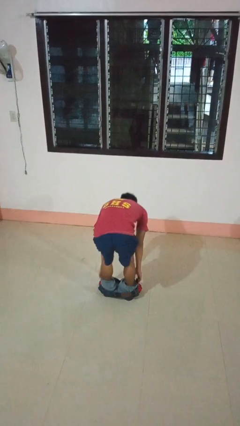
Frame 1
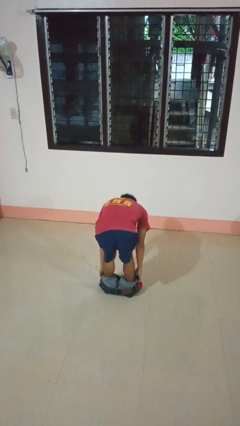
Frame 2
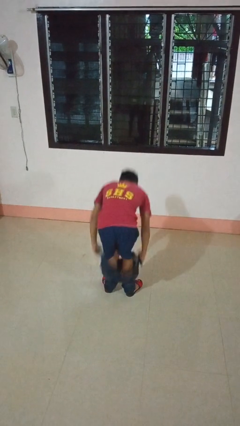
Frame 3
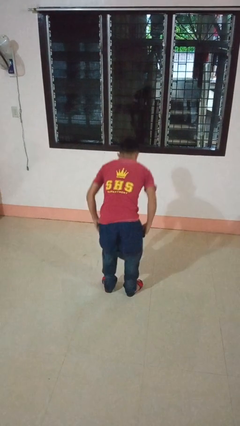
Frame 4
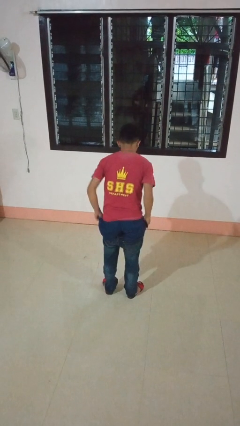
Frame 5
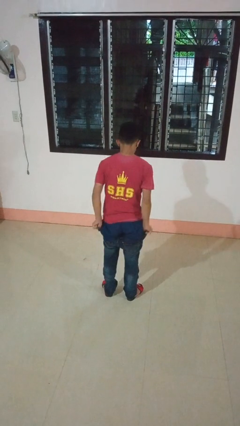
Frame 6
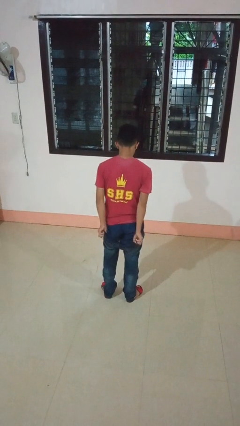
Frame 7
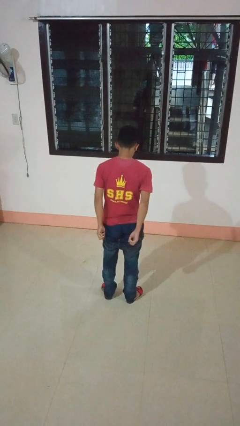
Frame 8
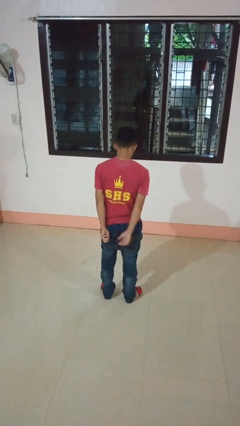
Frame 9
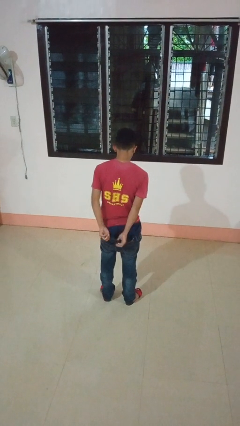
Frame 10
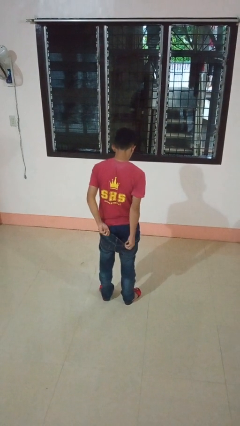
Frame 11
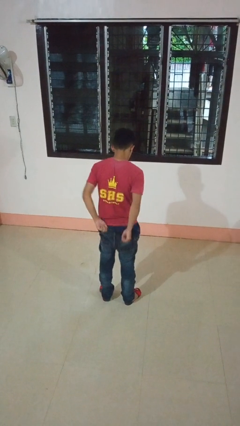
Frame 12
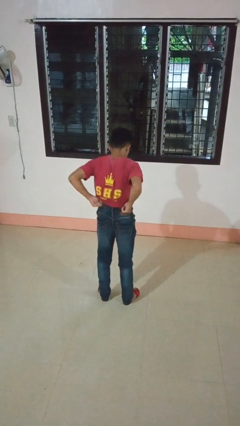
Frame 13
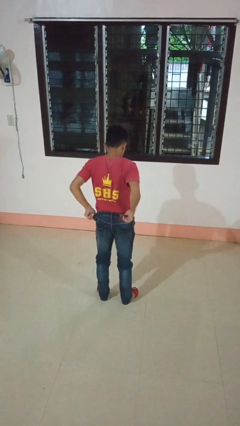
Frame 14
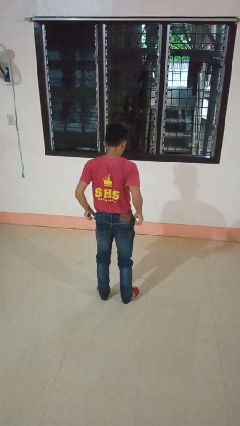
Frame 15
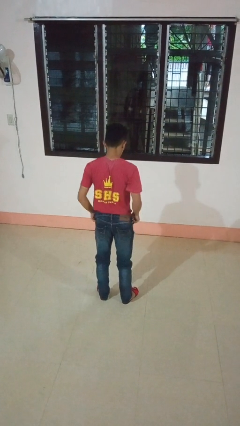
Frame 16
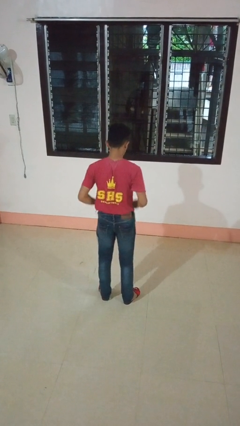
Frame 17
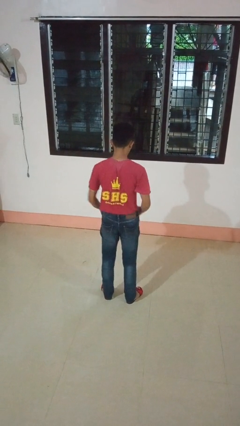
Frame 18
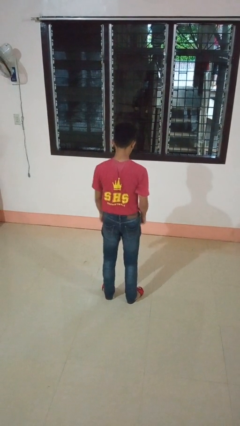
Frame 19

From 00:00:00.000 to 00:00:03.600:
person puts on pants

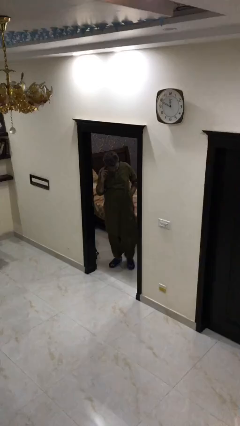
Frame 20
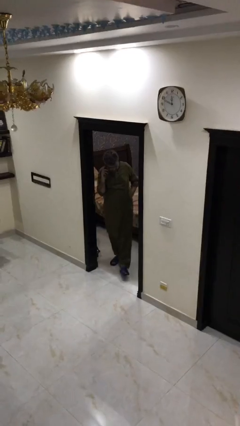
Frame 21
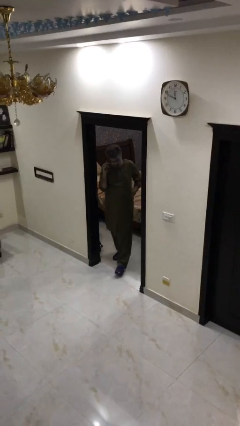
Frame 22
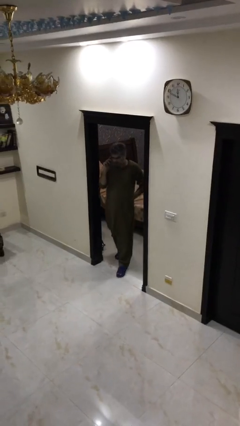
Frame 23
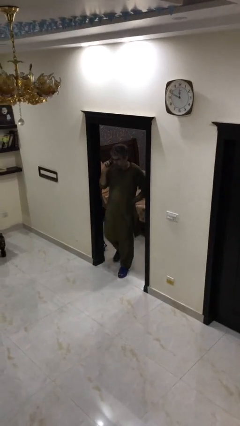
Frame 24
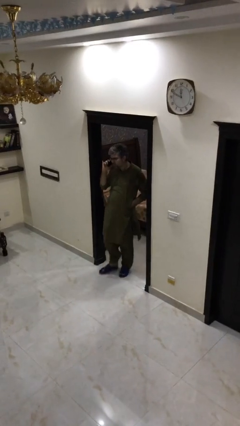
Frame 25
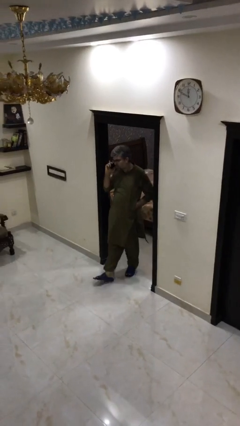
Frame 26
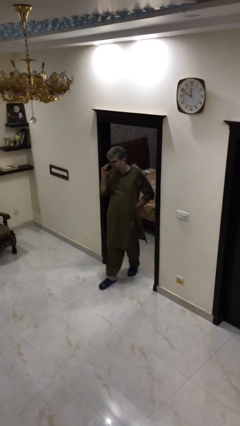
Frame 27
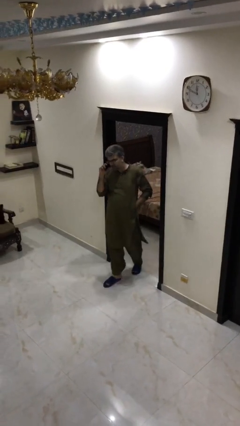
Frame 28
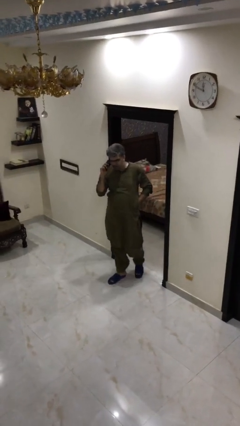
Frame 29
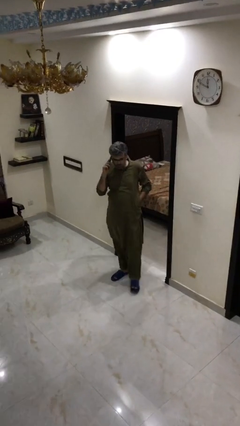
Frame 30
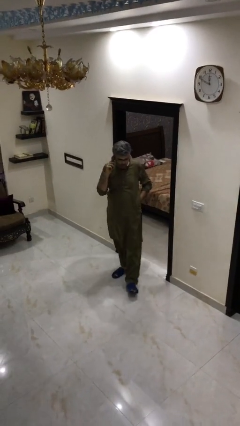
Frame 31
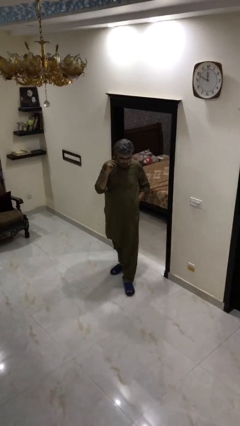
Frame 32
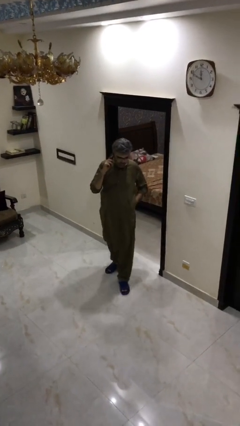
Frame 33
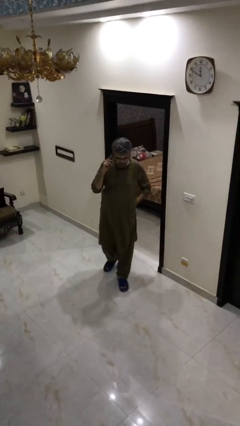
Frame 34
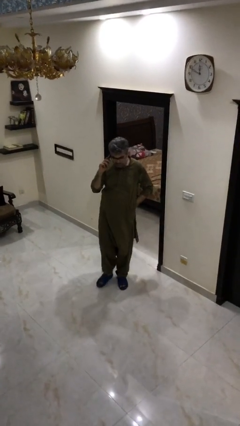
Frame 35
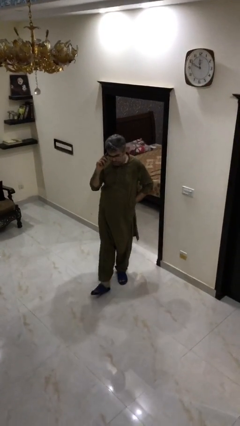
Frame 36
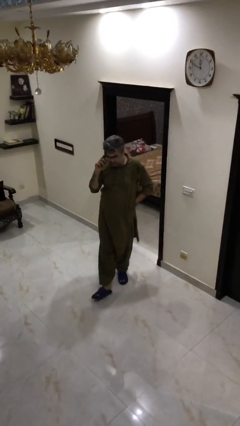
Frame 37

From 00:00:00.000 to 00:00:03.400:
person enters scene through structure

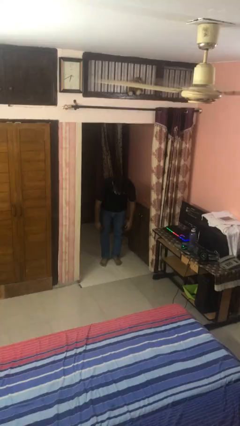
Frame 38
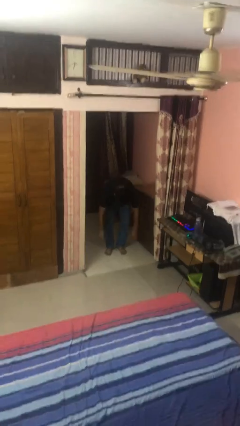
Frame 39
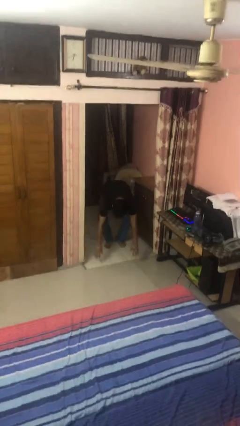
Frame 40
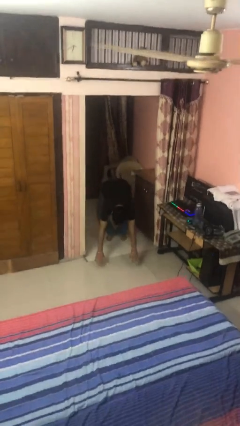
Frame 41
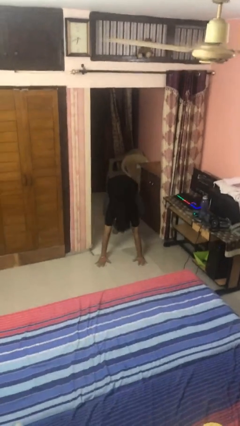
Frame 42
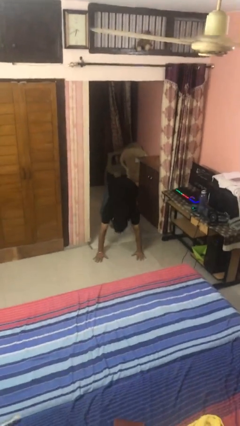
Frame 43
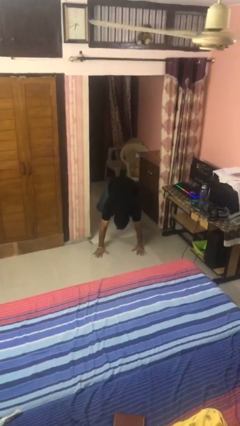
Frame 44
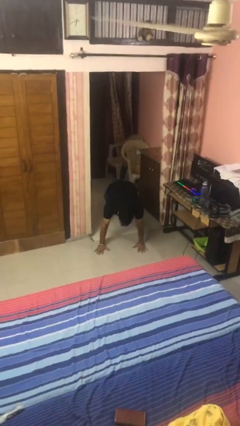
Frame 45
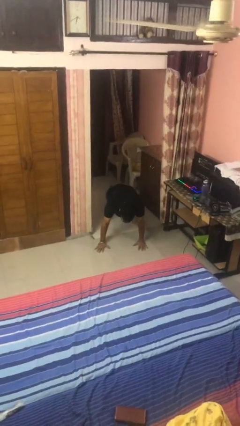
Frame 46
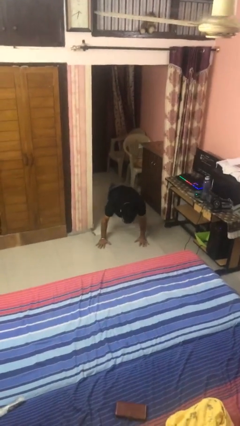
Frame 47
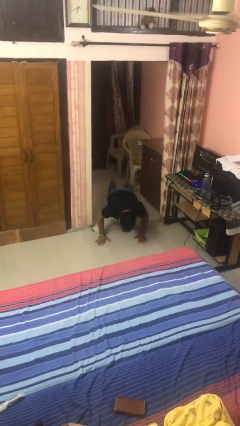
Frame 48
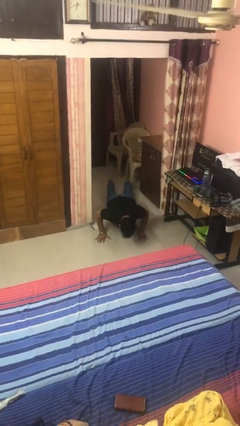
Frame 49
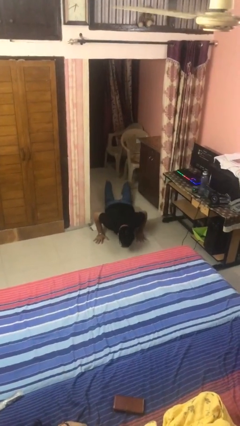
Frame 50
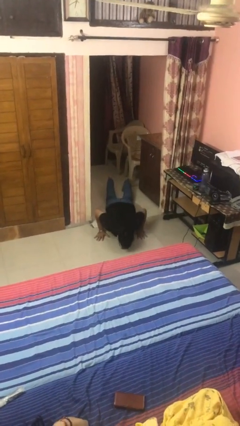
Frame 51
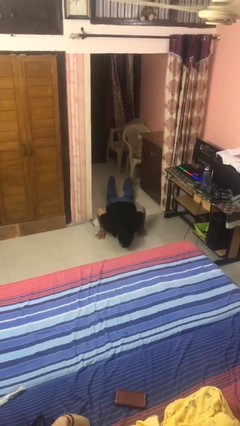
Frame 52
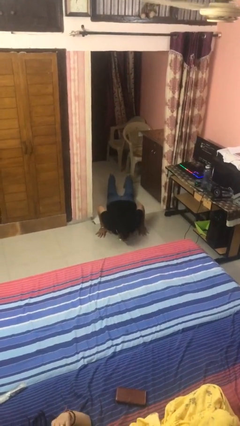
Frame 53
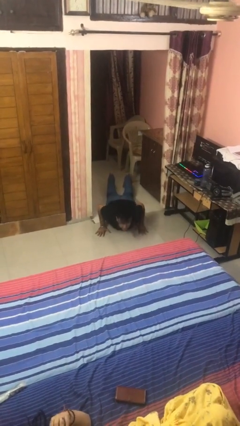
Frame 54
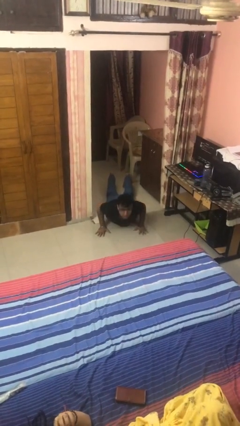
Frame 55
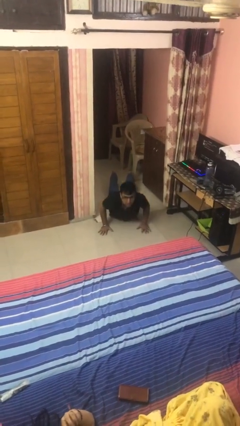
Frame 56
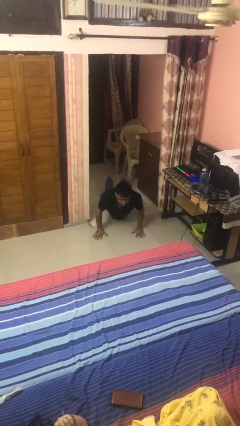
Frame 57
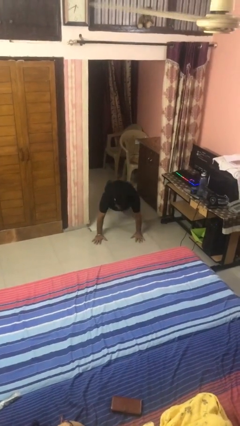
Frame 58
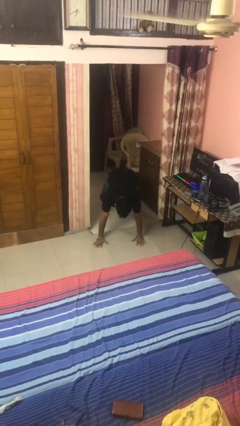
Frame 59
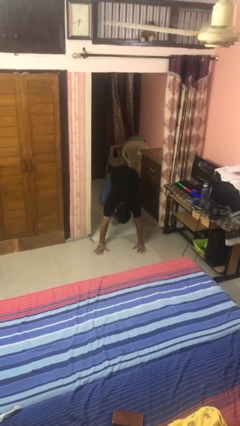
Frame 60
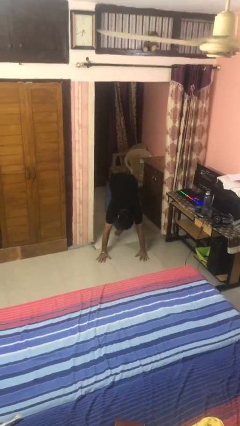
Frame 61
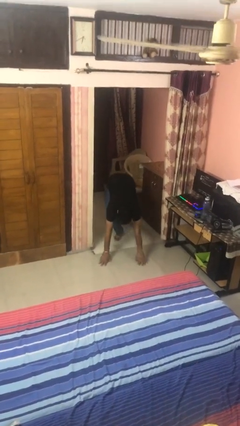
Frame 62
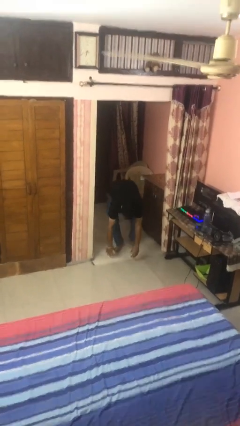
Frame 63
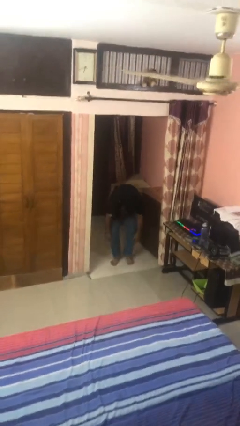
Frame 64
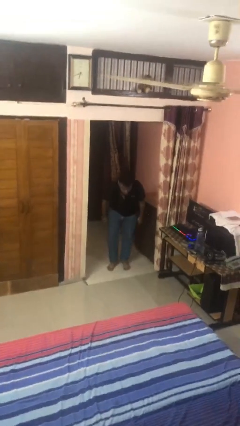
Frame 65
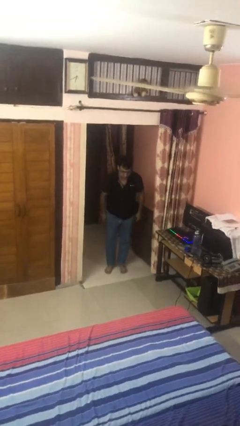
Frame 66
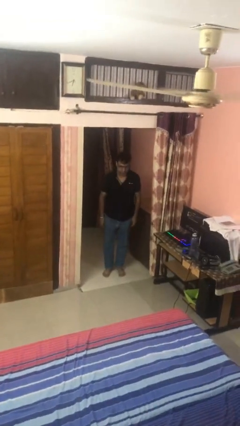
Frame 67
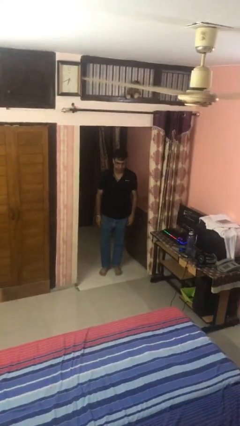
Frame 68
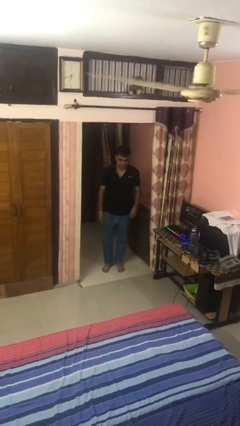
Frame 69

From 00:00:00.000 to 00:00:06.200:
person exercises with pushup

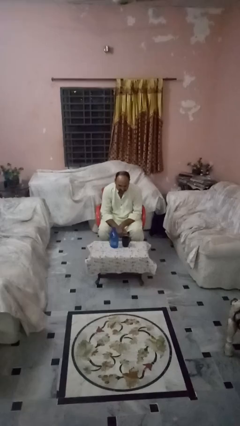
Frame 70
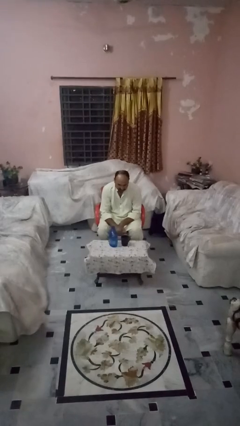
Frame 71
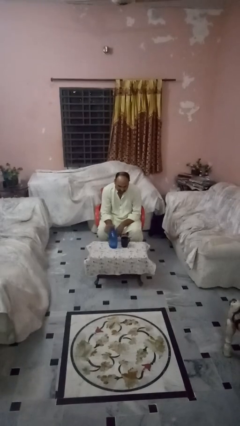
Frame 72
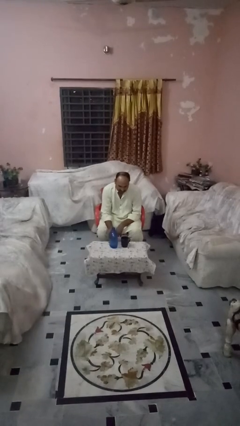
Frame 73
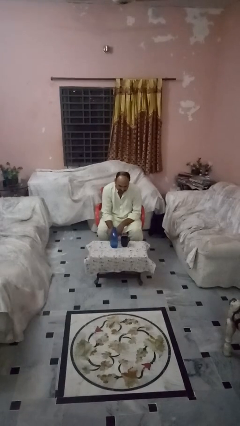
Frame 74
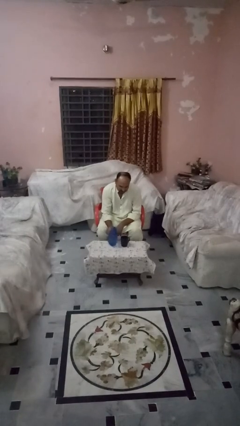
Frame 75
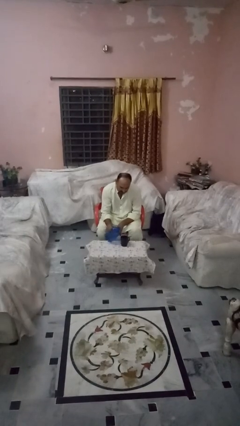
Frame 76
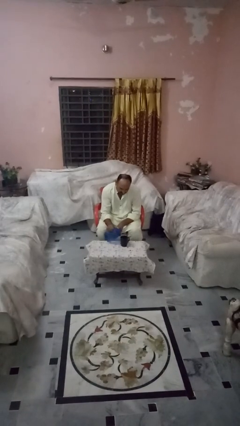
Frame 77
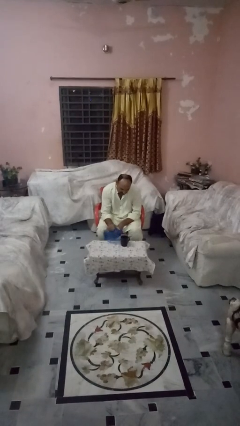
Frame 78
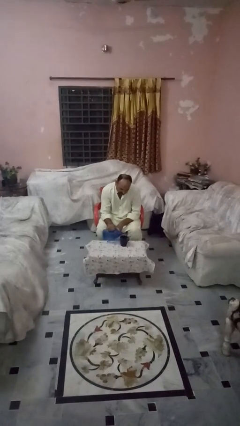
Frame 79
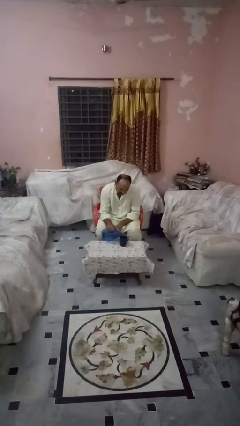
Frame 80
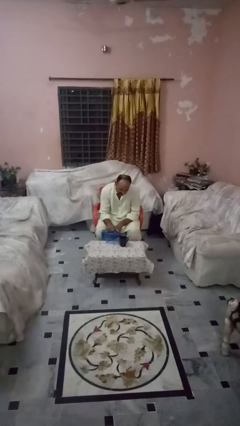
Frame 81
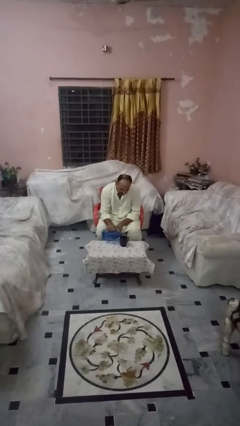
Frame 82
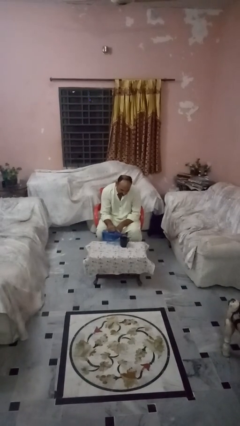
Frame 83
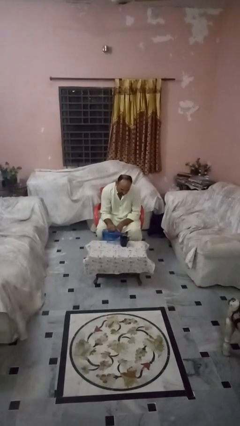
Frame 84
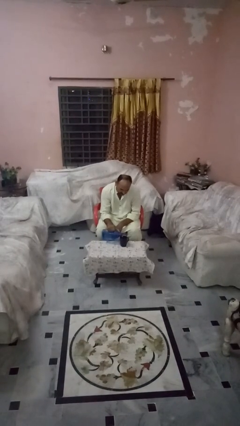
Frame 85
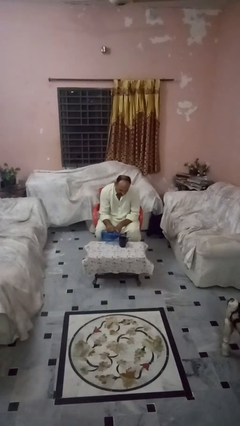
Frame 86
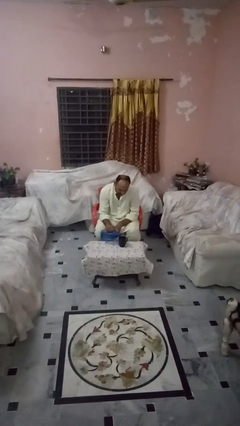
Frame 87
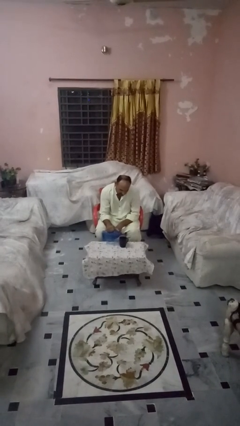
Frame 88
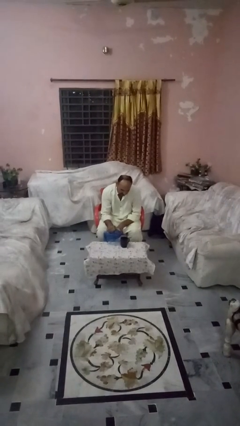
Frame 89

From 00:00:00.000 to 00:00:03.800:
person pours liquid into cup

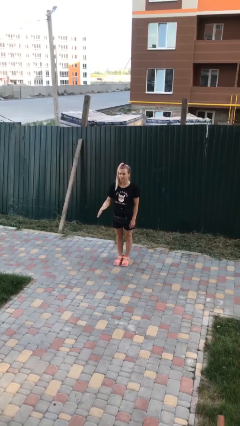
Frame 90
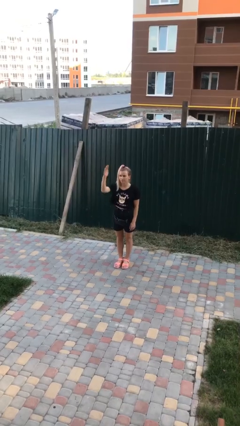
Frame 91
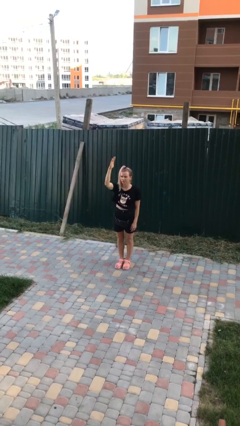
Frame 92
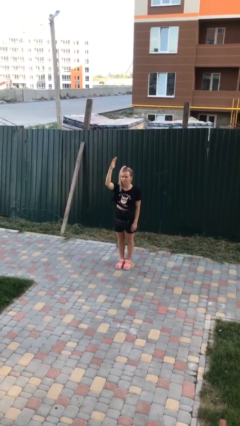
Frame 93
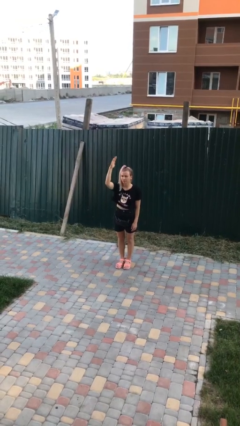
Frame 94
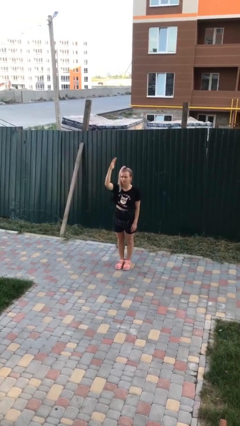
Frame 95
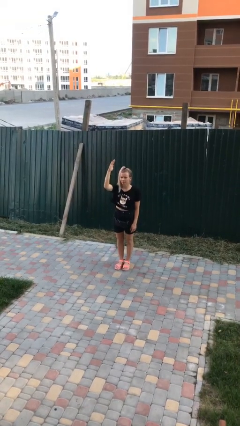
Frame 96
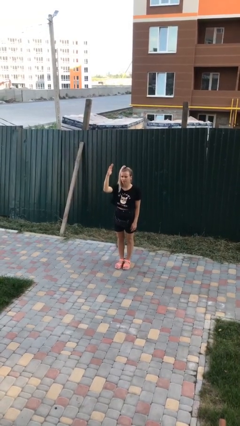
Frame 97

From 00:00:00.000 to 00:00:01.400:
person gestures raise hand
